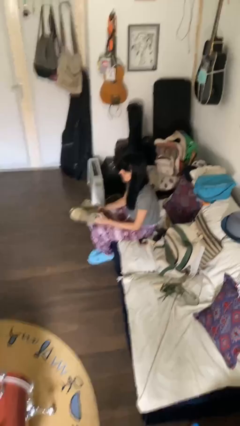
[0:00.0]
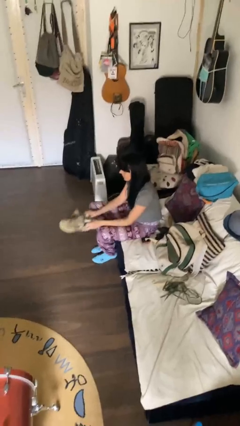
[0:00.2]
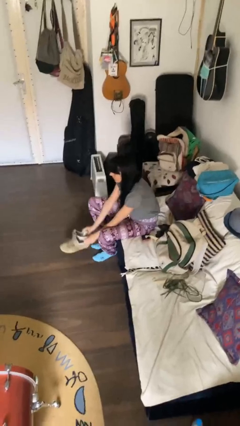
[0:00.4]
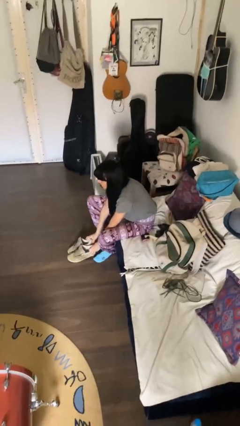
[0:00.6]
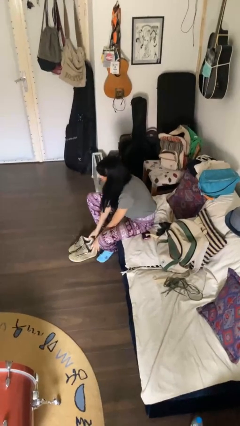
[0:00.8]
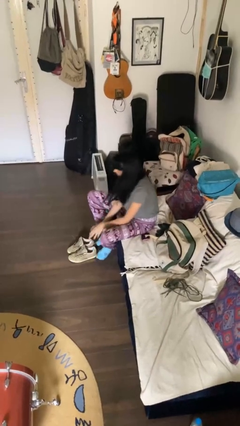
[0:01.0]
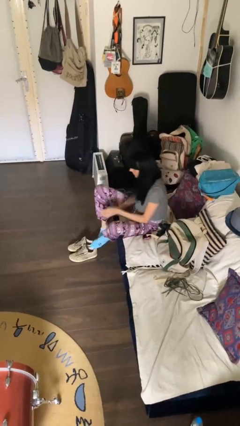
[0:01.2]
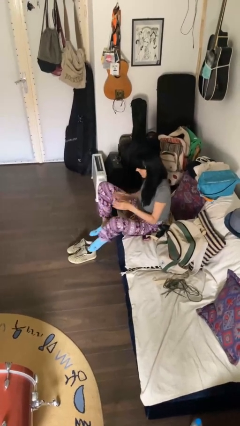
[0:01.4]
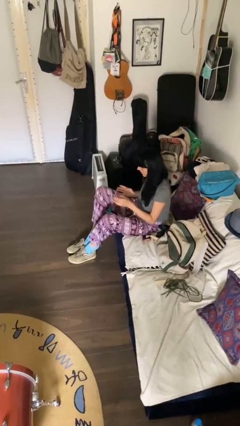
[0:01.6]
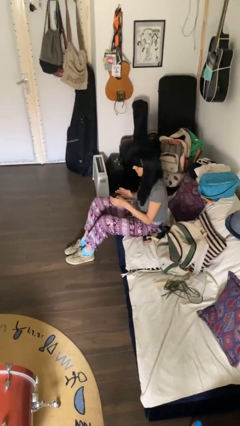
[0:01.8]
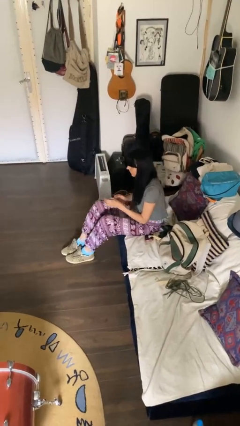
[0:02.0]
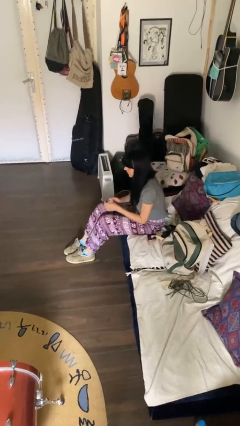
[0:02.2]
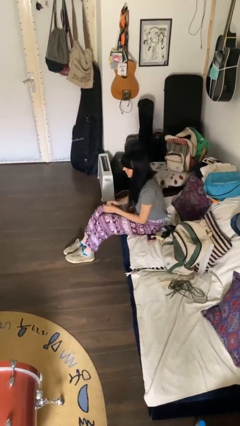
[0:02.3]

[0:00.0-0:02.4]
person puts on shoes

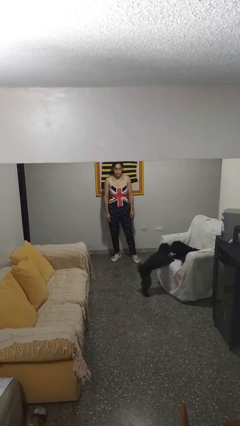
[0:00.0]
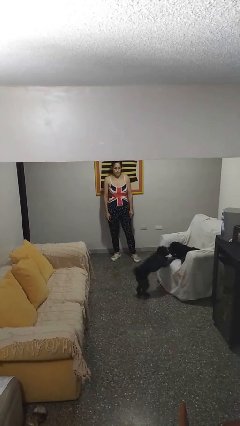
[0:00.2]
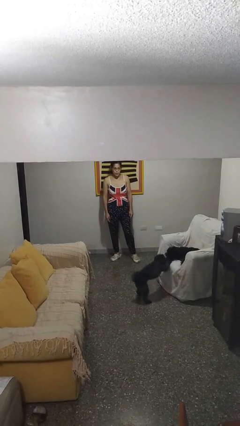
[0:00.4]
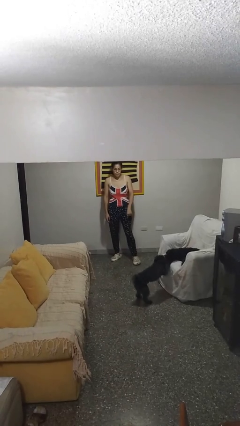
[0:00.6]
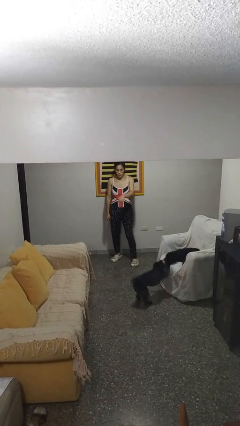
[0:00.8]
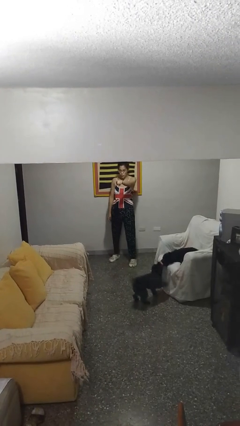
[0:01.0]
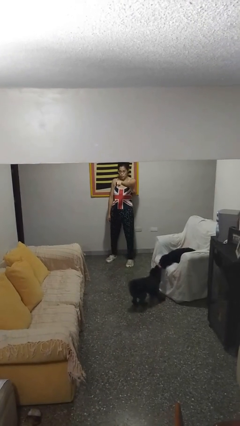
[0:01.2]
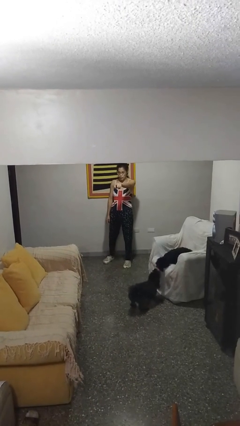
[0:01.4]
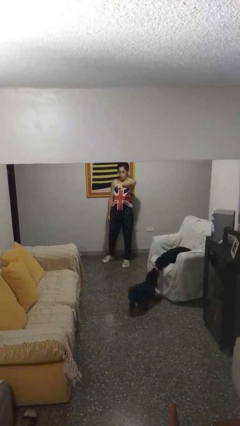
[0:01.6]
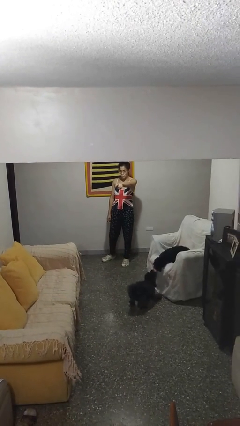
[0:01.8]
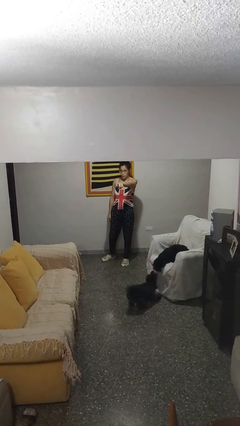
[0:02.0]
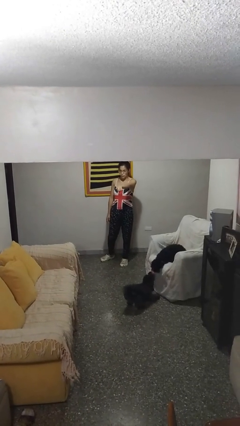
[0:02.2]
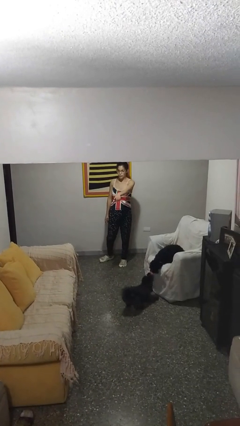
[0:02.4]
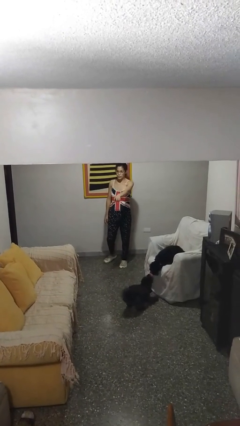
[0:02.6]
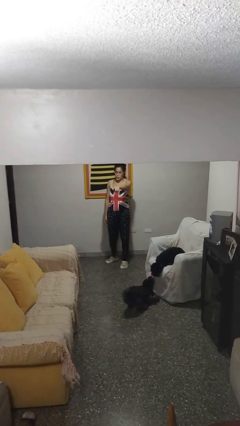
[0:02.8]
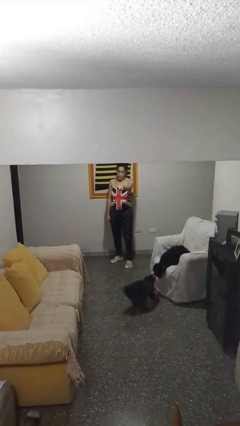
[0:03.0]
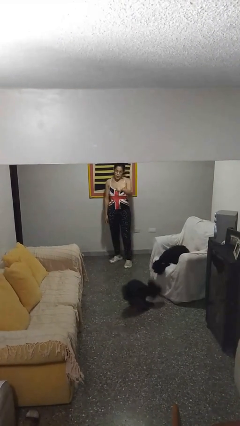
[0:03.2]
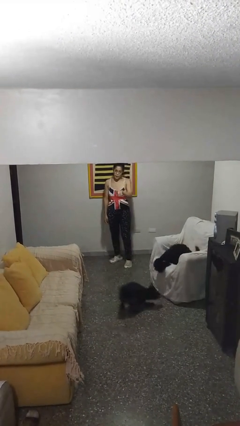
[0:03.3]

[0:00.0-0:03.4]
person points at person

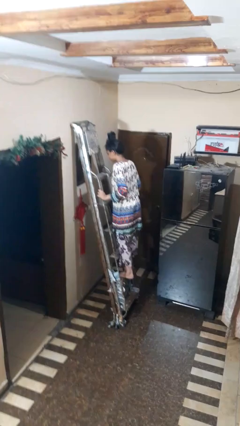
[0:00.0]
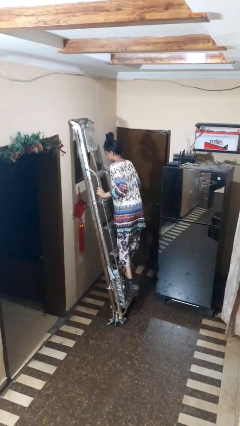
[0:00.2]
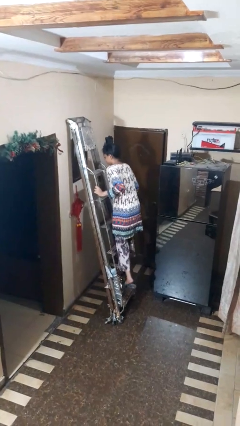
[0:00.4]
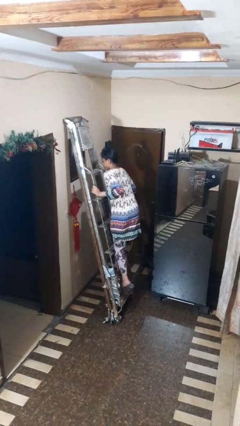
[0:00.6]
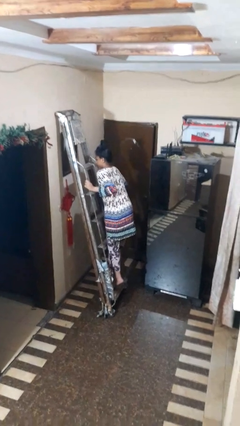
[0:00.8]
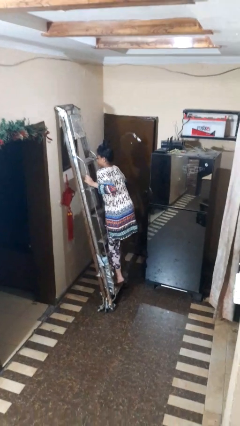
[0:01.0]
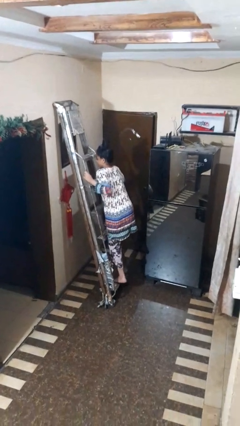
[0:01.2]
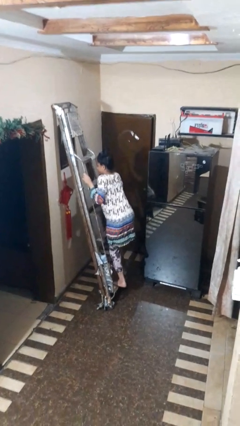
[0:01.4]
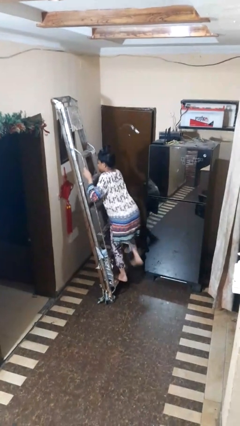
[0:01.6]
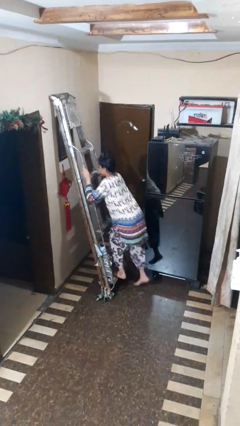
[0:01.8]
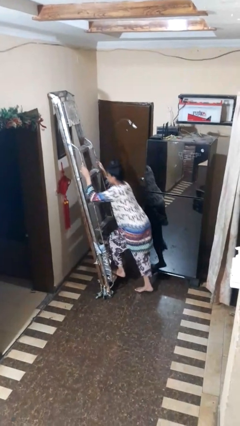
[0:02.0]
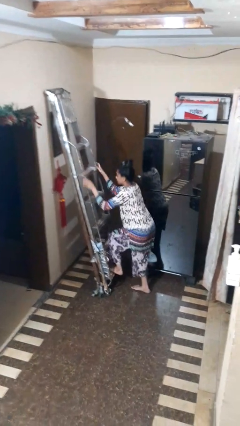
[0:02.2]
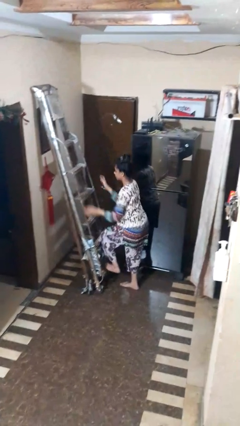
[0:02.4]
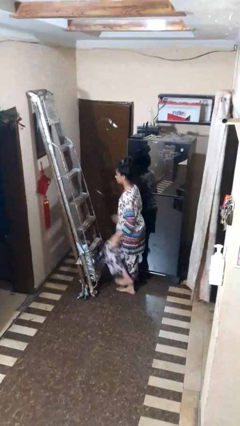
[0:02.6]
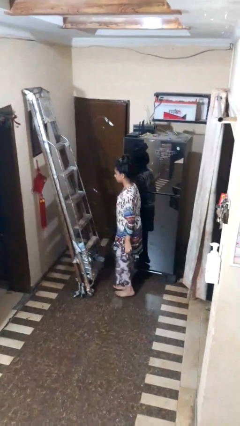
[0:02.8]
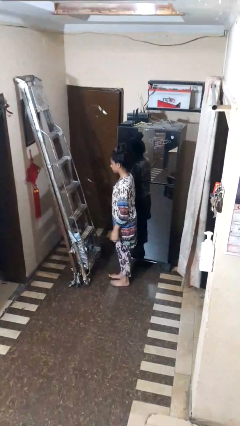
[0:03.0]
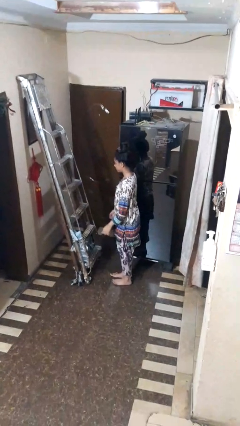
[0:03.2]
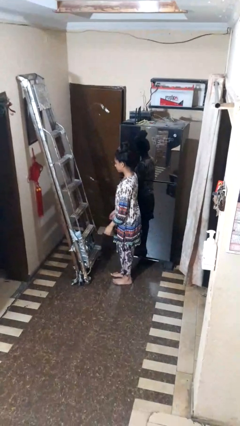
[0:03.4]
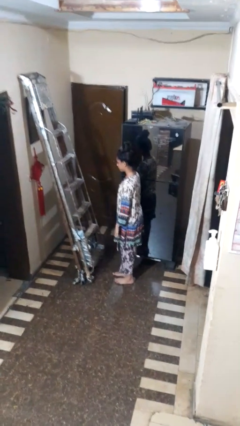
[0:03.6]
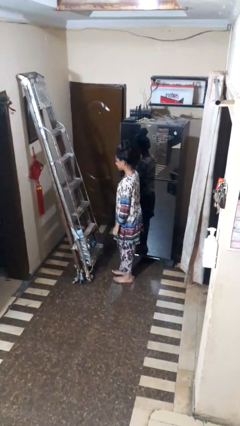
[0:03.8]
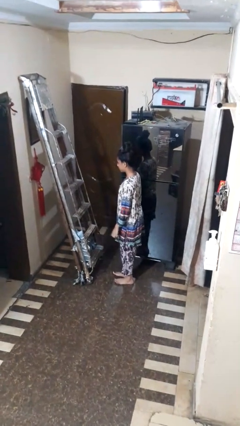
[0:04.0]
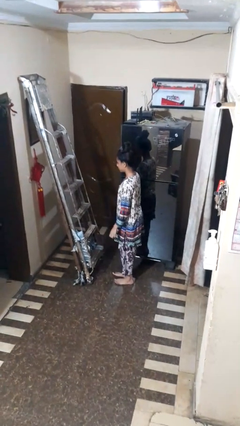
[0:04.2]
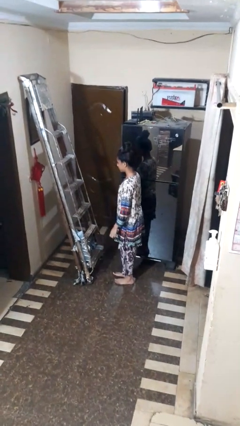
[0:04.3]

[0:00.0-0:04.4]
person climbs down ladder

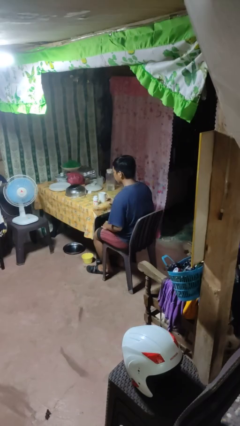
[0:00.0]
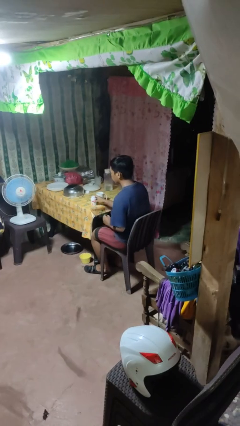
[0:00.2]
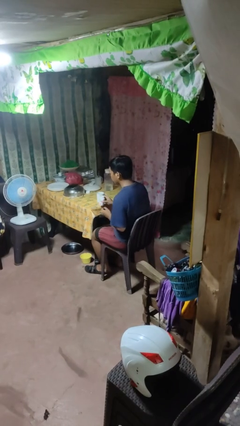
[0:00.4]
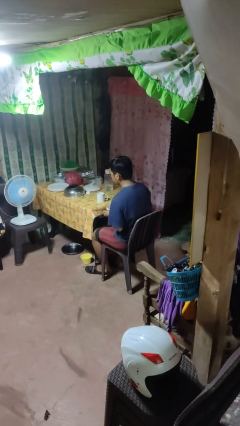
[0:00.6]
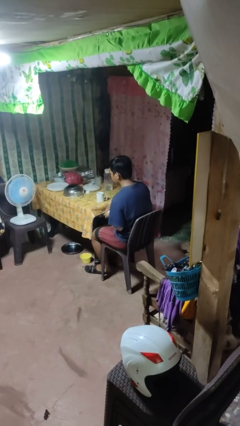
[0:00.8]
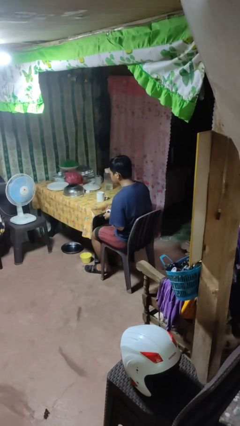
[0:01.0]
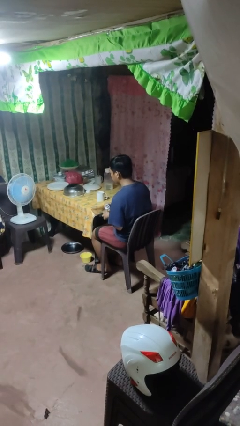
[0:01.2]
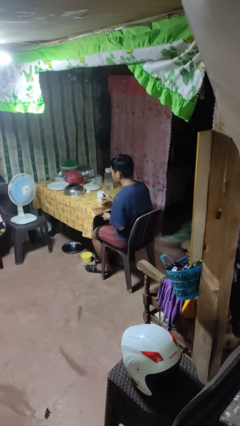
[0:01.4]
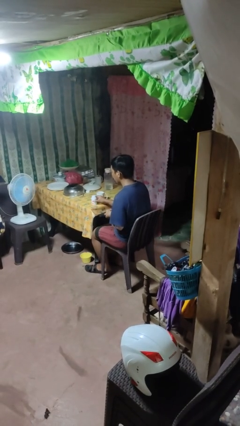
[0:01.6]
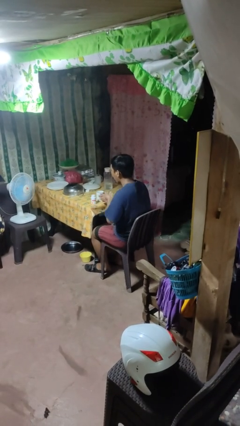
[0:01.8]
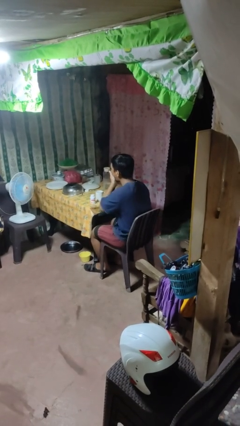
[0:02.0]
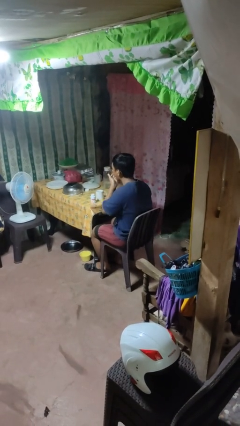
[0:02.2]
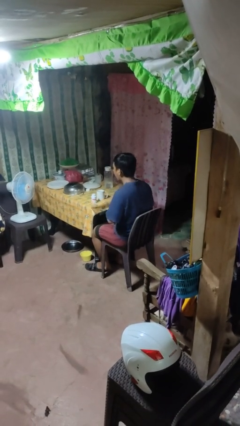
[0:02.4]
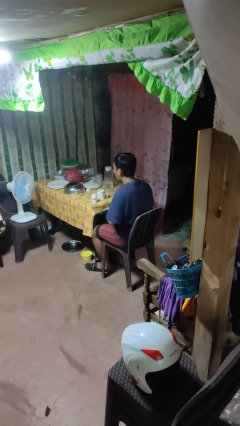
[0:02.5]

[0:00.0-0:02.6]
person takes medicine pills

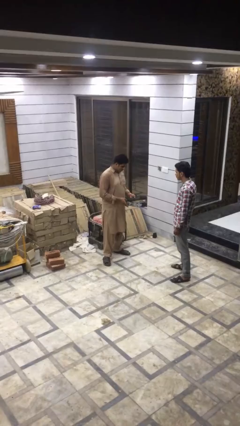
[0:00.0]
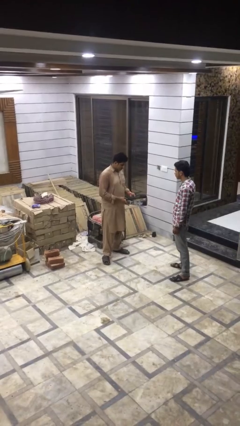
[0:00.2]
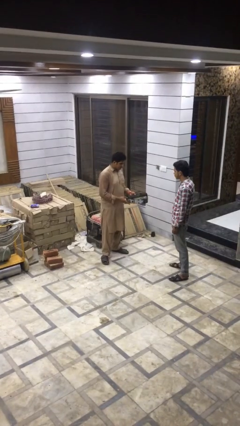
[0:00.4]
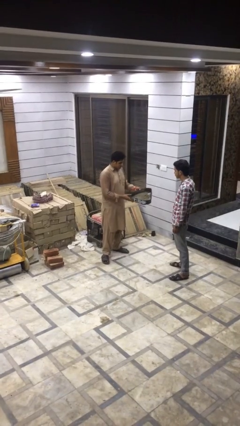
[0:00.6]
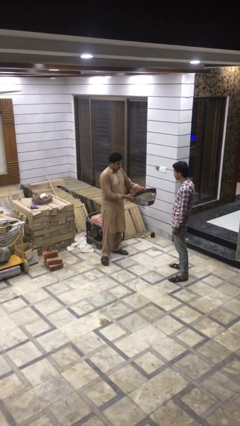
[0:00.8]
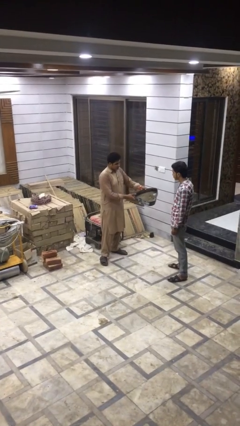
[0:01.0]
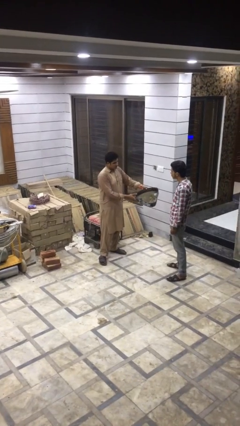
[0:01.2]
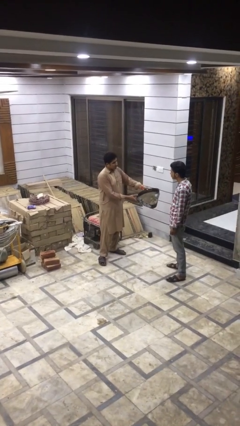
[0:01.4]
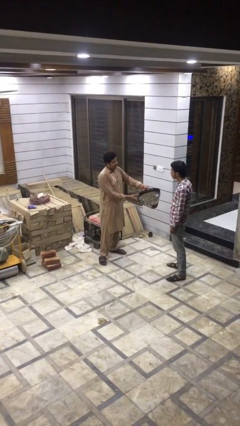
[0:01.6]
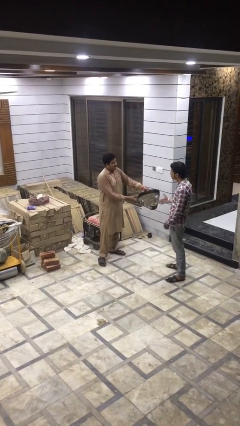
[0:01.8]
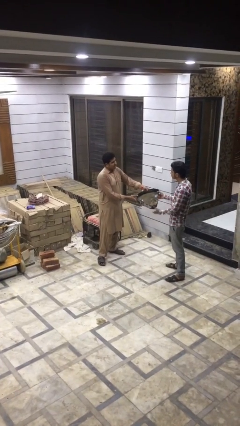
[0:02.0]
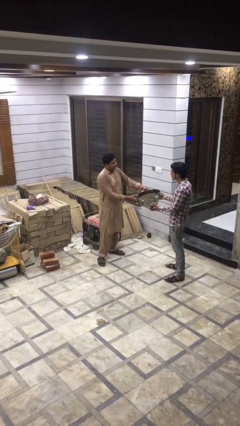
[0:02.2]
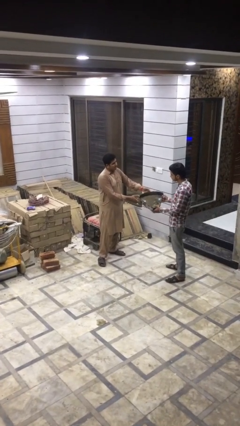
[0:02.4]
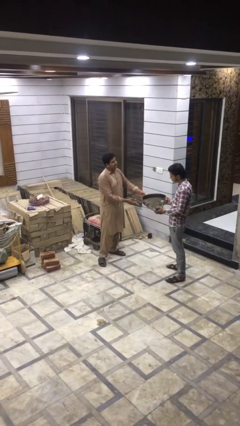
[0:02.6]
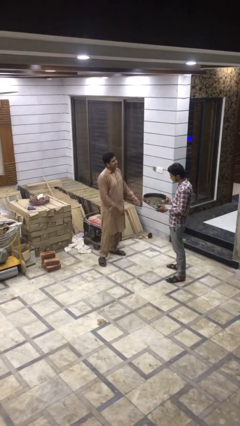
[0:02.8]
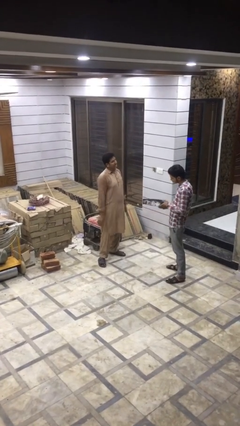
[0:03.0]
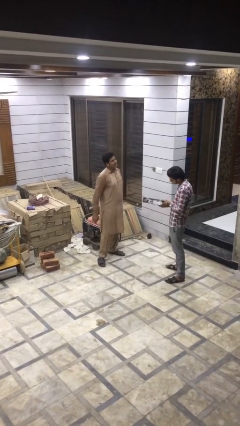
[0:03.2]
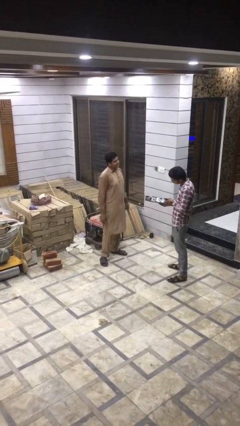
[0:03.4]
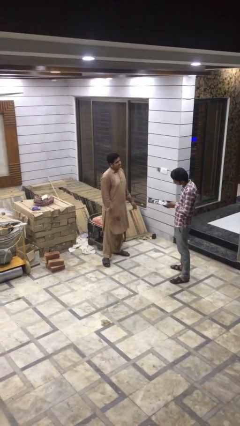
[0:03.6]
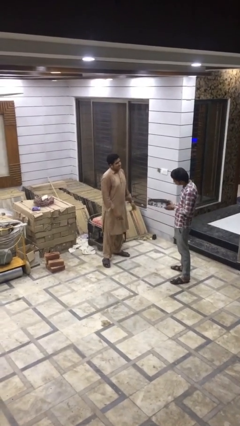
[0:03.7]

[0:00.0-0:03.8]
person transfers object to person

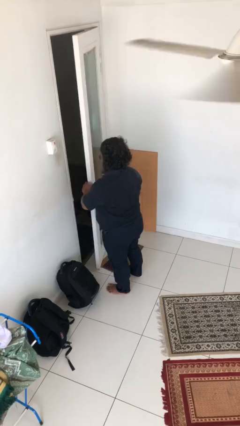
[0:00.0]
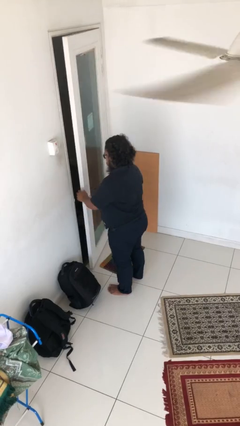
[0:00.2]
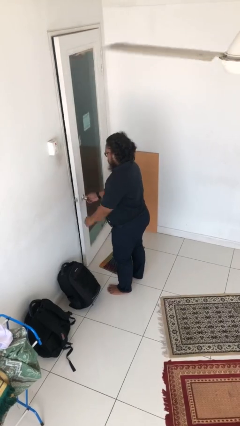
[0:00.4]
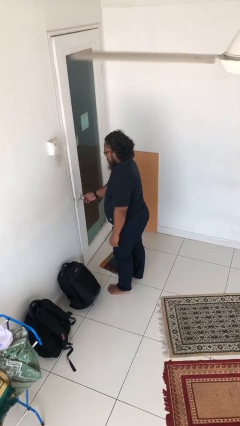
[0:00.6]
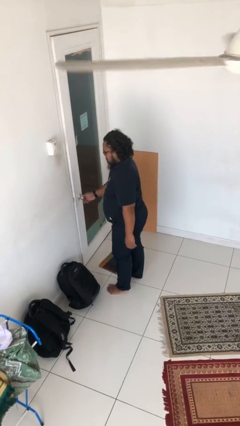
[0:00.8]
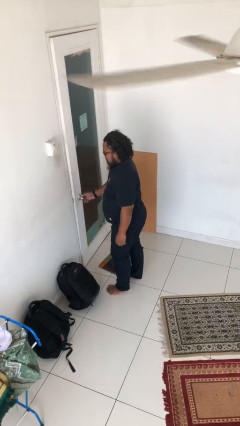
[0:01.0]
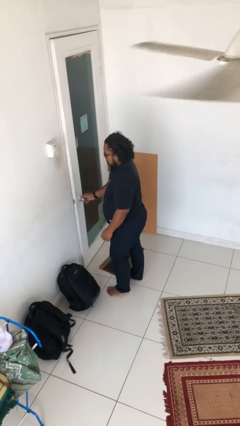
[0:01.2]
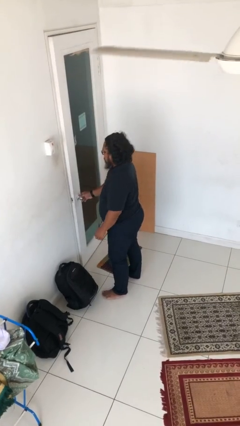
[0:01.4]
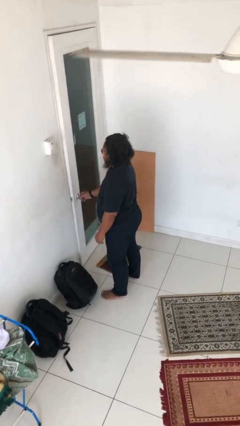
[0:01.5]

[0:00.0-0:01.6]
person closes facility door
